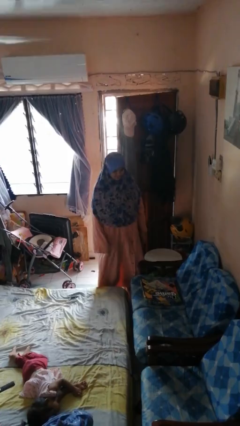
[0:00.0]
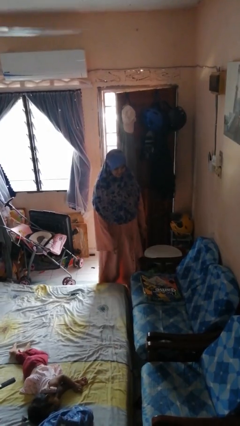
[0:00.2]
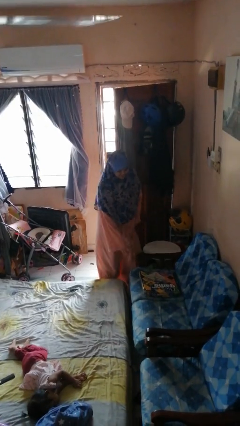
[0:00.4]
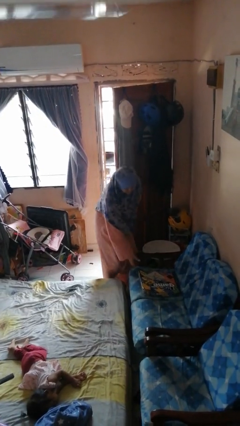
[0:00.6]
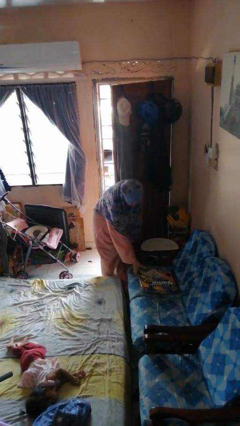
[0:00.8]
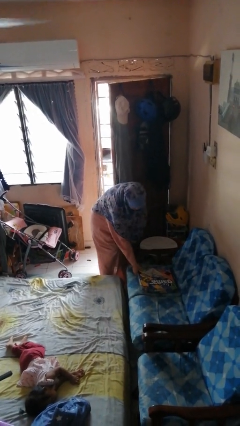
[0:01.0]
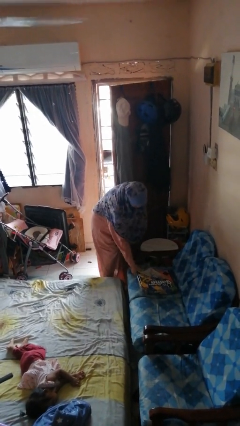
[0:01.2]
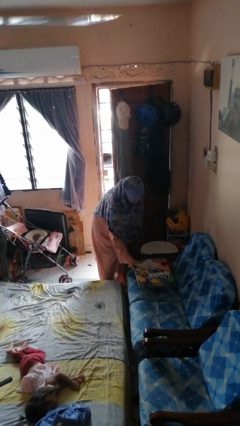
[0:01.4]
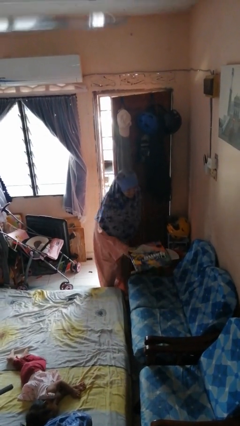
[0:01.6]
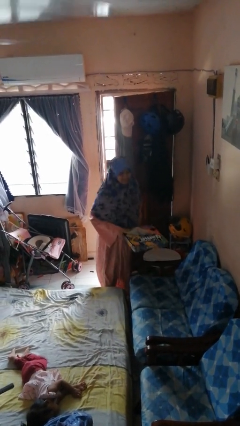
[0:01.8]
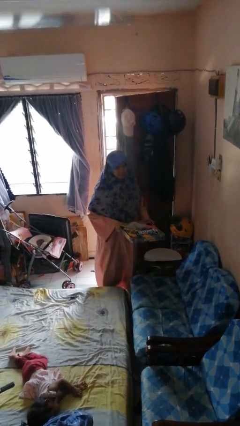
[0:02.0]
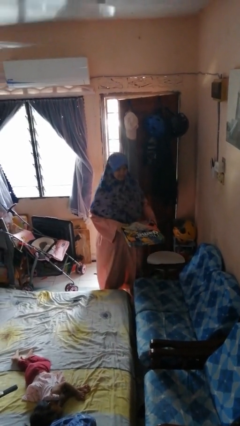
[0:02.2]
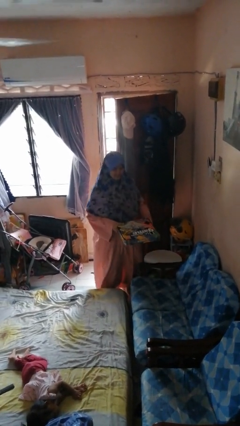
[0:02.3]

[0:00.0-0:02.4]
person picks up object from couch

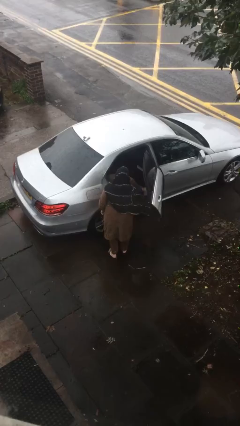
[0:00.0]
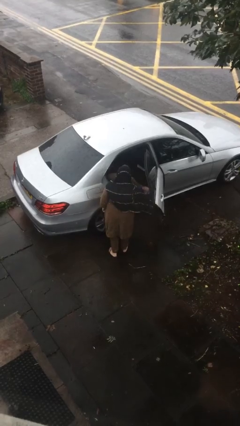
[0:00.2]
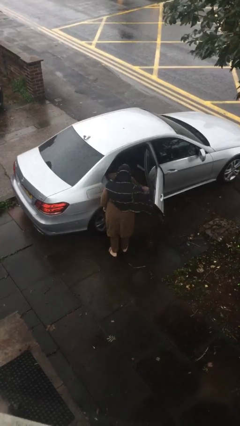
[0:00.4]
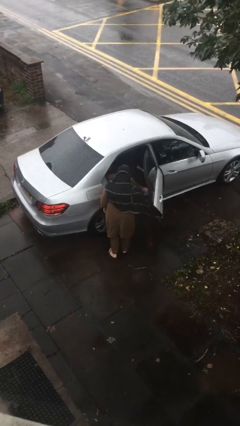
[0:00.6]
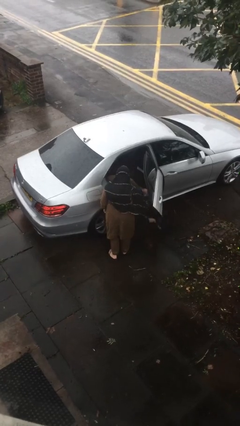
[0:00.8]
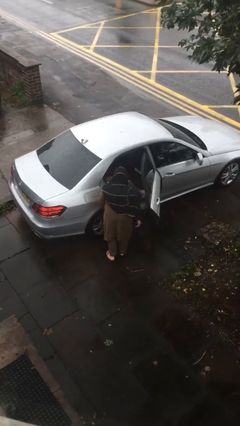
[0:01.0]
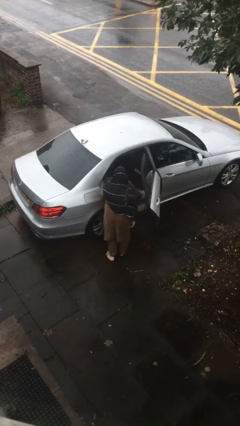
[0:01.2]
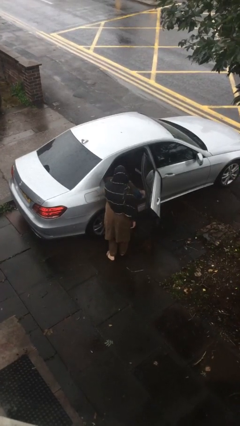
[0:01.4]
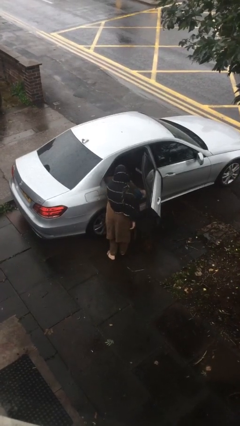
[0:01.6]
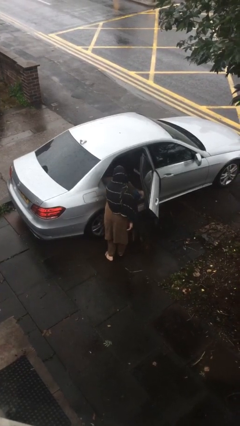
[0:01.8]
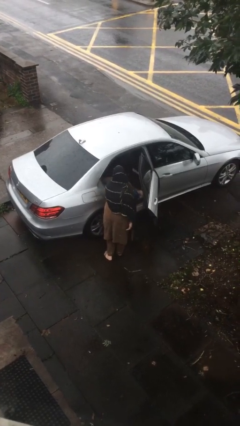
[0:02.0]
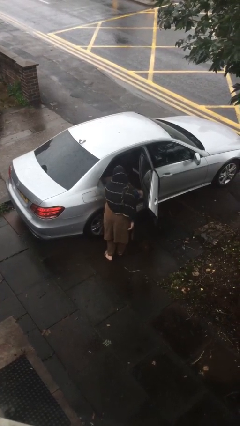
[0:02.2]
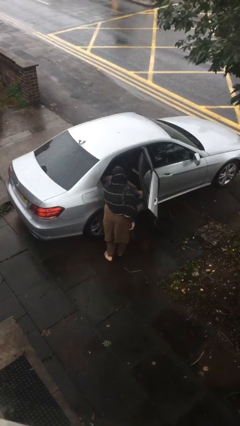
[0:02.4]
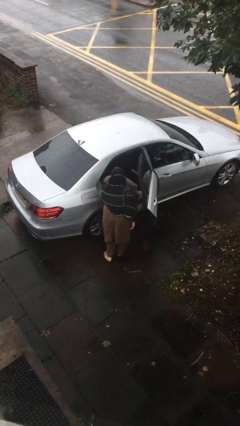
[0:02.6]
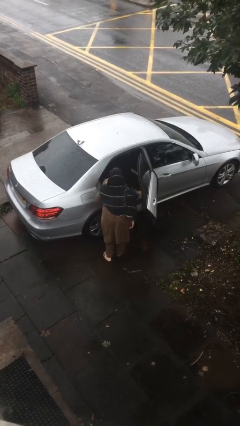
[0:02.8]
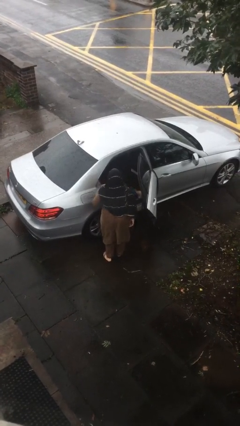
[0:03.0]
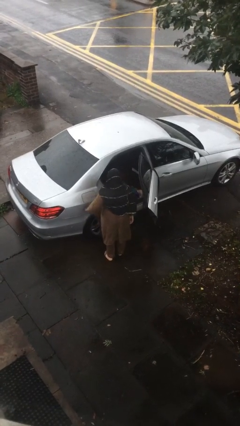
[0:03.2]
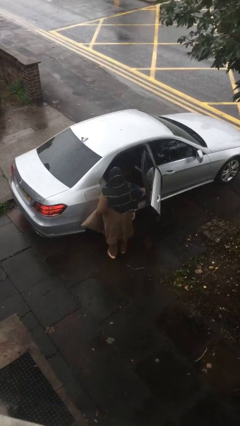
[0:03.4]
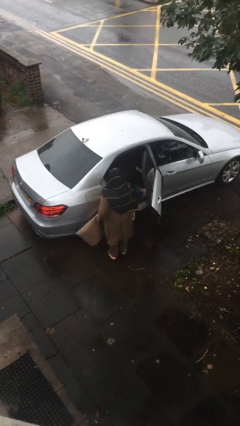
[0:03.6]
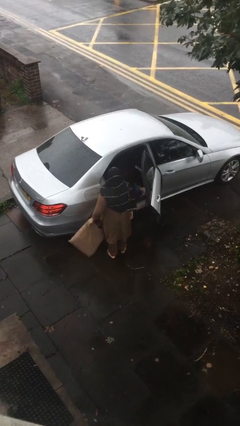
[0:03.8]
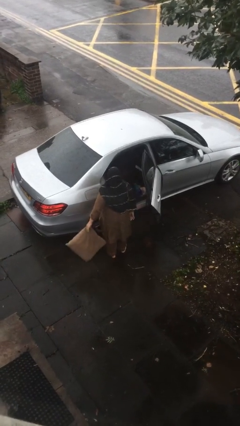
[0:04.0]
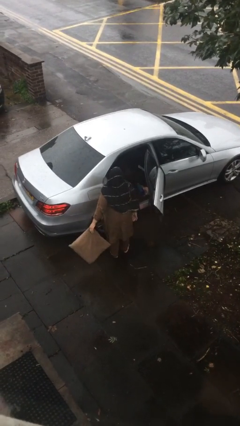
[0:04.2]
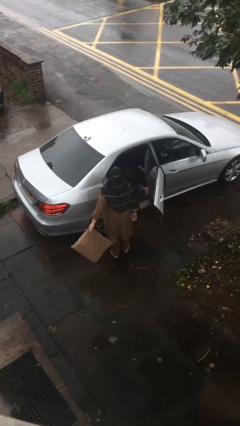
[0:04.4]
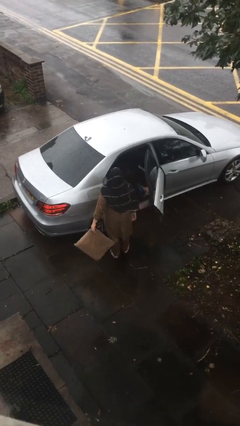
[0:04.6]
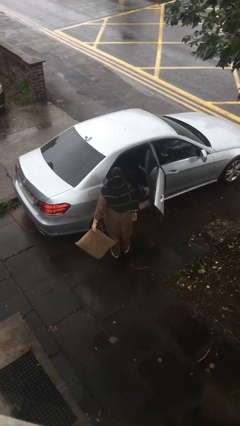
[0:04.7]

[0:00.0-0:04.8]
person unloads car

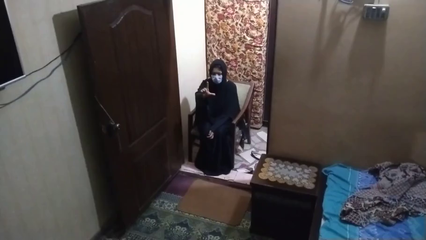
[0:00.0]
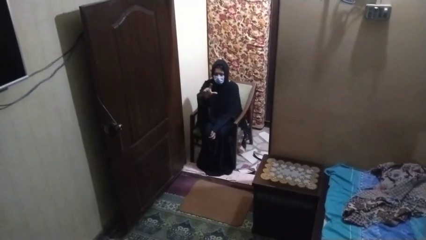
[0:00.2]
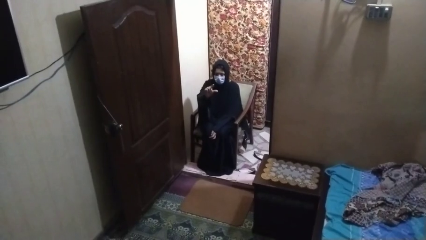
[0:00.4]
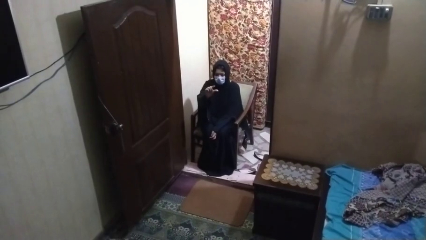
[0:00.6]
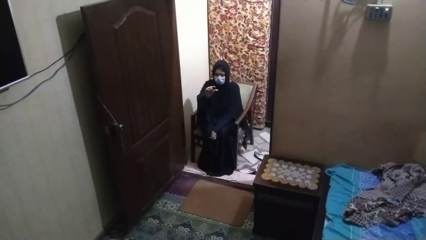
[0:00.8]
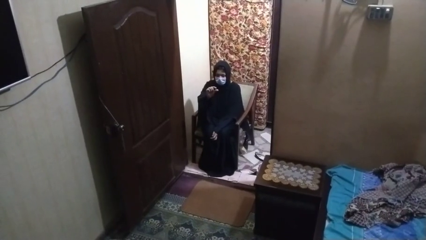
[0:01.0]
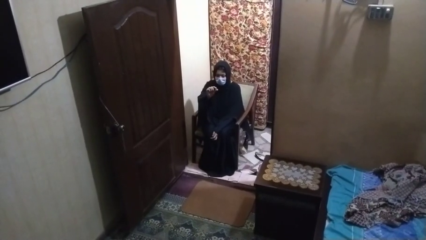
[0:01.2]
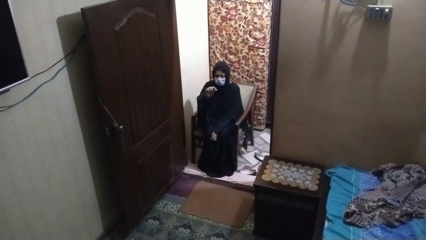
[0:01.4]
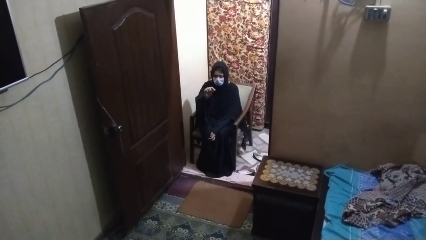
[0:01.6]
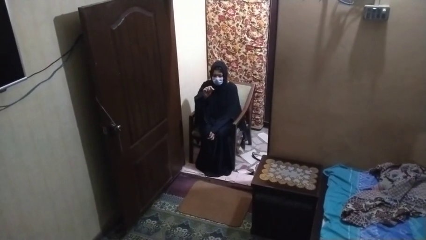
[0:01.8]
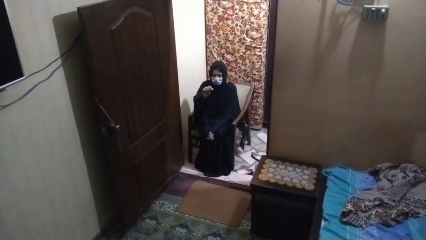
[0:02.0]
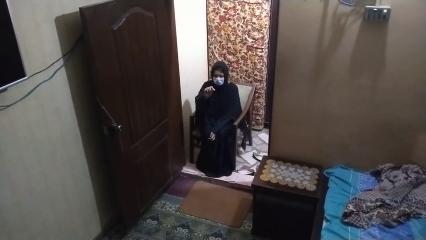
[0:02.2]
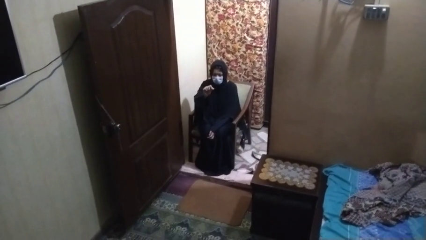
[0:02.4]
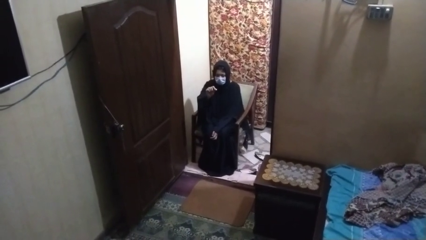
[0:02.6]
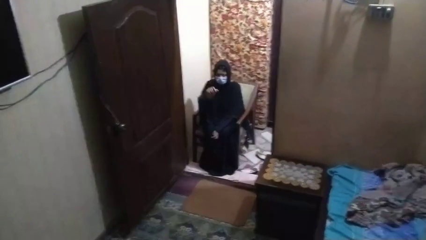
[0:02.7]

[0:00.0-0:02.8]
person gestures zoom out

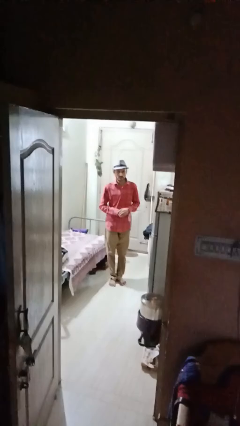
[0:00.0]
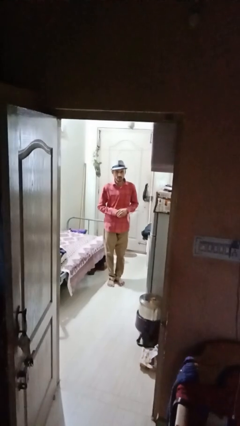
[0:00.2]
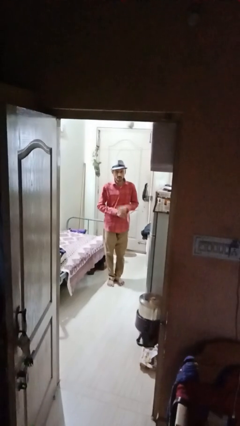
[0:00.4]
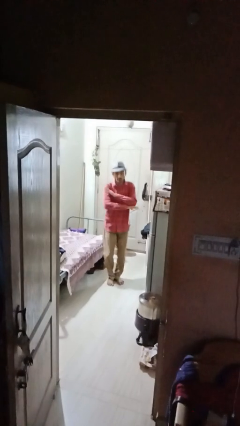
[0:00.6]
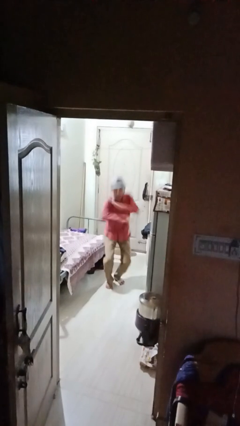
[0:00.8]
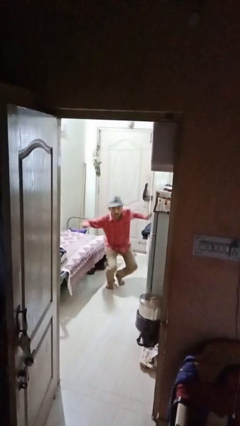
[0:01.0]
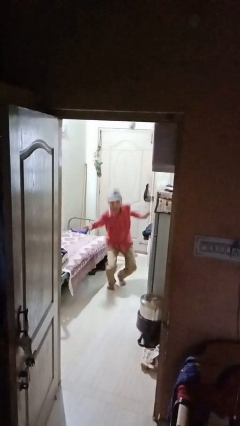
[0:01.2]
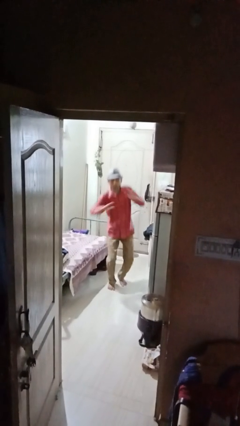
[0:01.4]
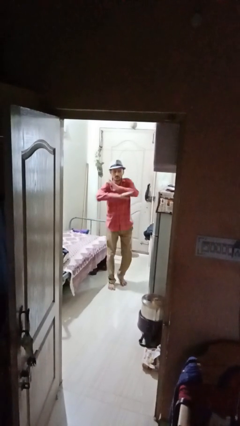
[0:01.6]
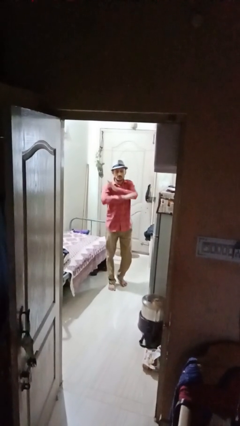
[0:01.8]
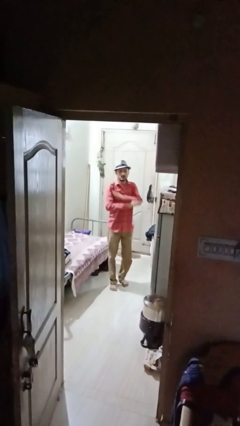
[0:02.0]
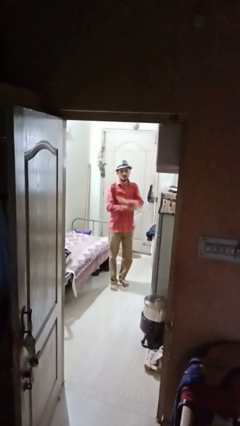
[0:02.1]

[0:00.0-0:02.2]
person karate chop

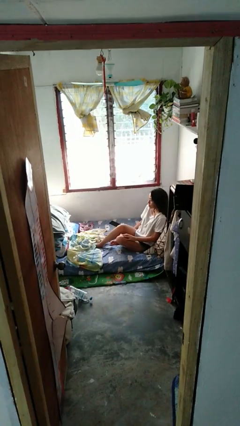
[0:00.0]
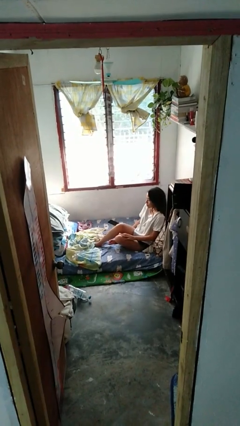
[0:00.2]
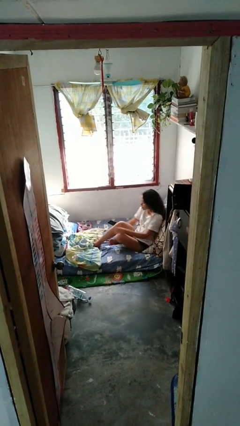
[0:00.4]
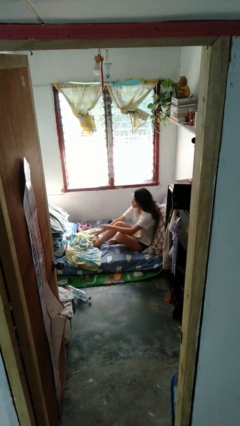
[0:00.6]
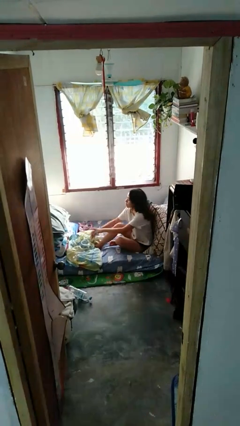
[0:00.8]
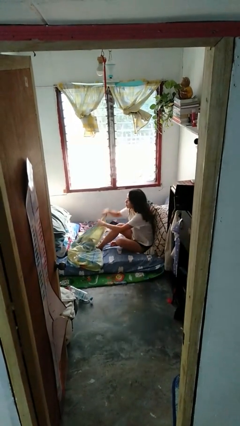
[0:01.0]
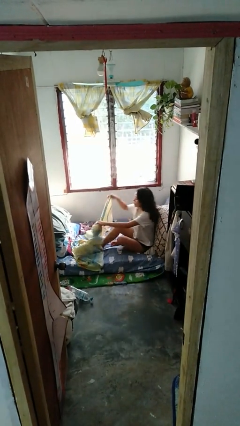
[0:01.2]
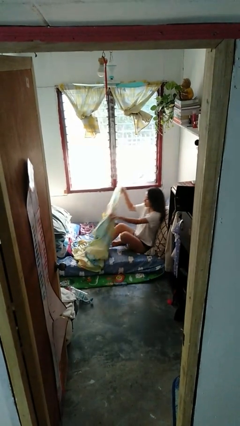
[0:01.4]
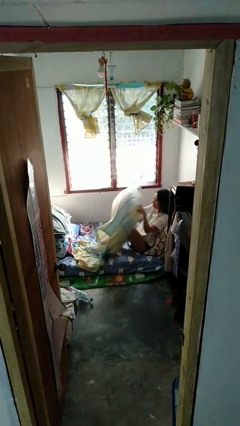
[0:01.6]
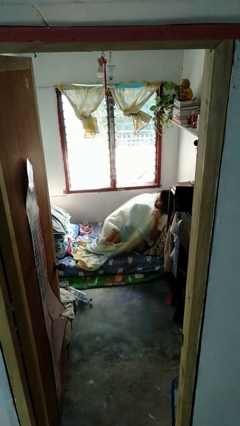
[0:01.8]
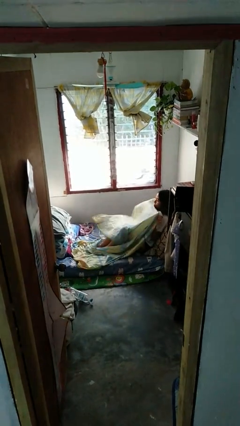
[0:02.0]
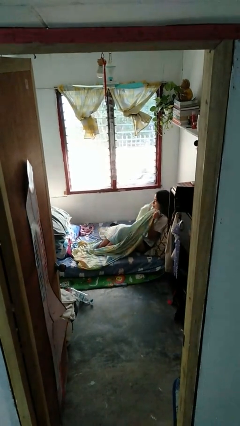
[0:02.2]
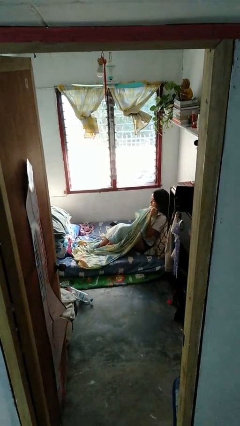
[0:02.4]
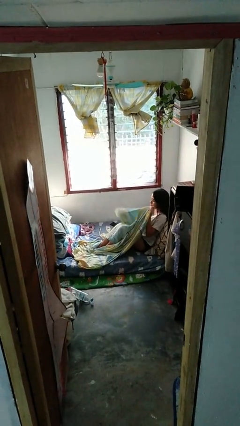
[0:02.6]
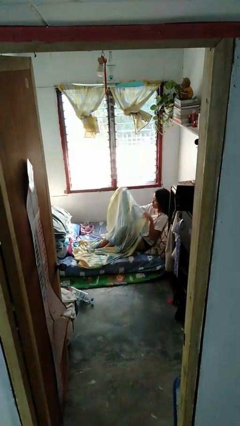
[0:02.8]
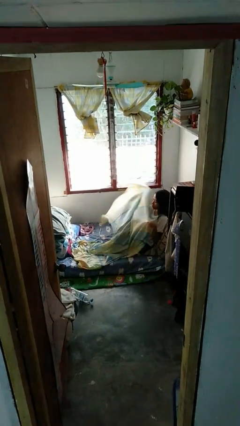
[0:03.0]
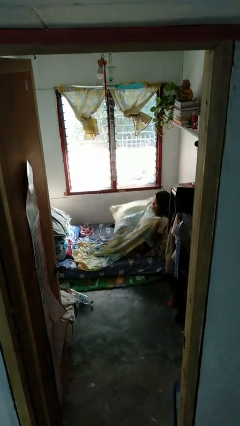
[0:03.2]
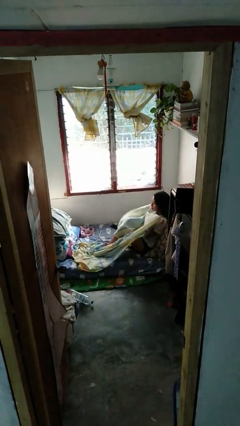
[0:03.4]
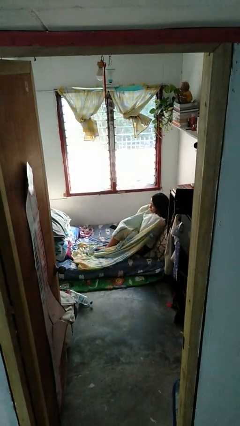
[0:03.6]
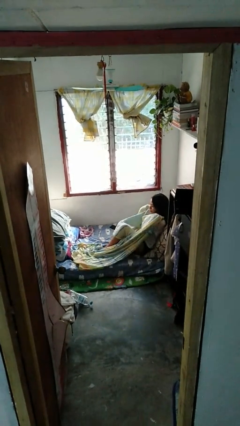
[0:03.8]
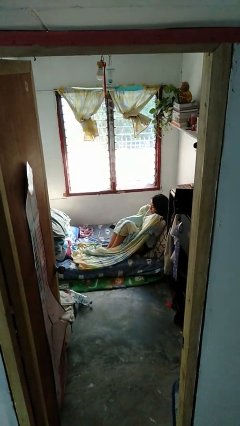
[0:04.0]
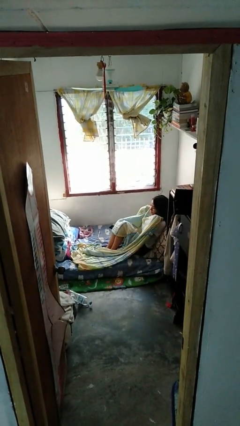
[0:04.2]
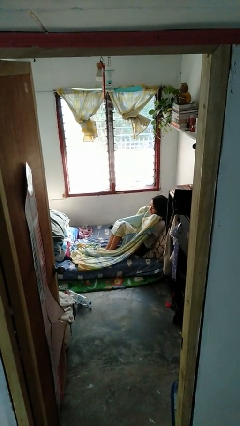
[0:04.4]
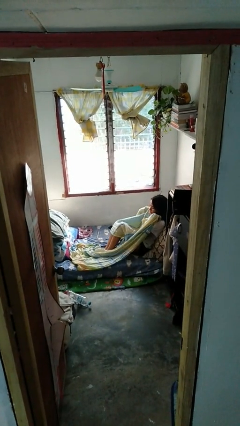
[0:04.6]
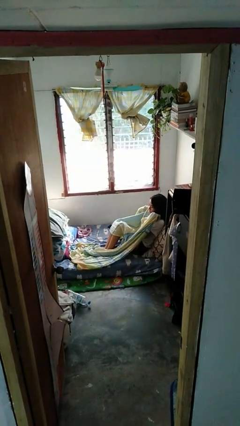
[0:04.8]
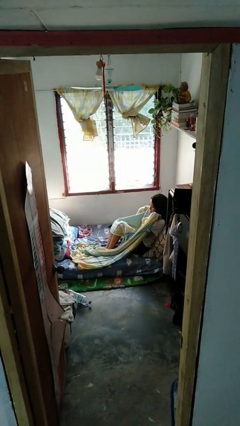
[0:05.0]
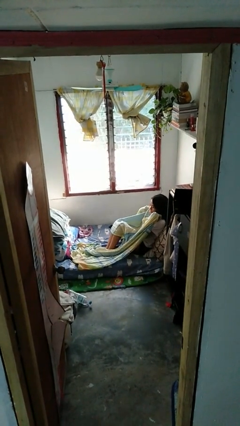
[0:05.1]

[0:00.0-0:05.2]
person covers with bedsheets
